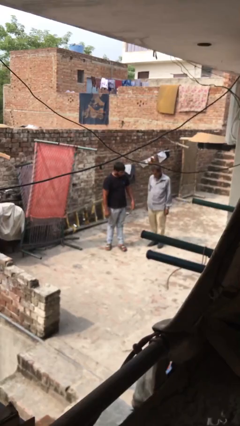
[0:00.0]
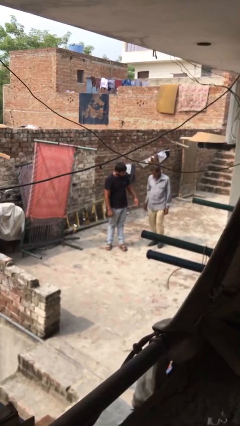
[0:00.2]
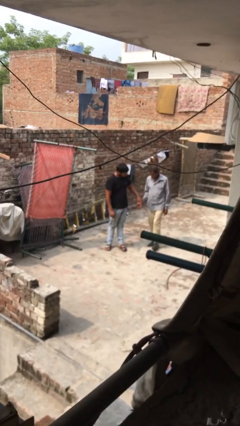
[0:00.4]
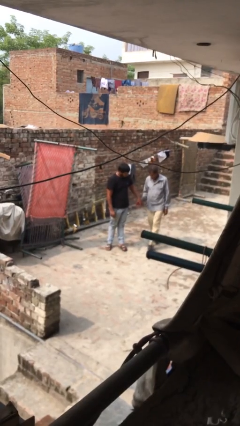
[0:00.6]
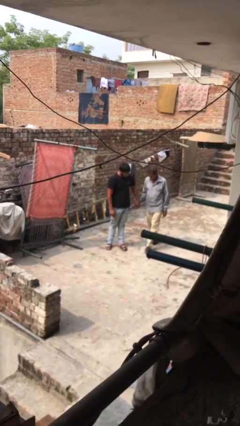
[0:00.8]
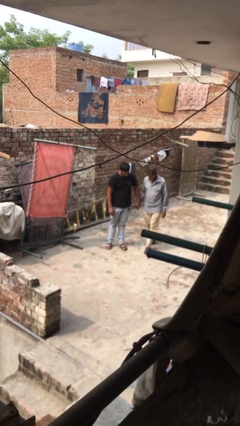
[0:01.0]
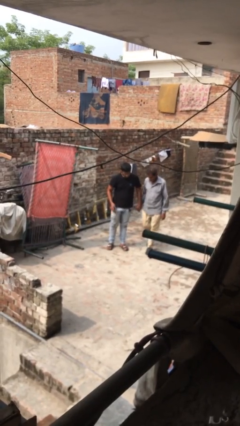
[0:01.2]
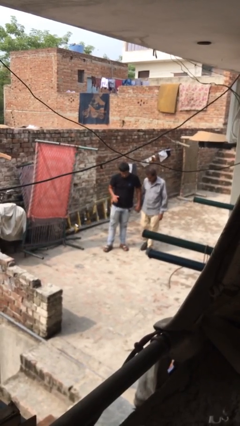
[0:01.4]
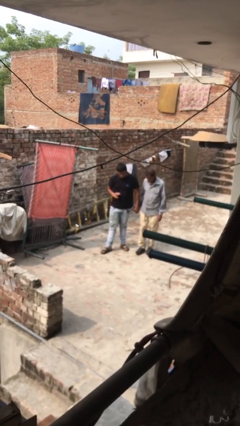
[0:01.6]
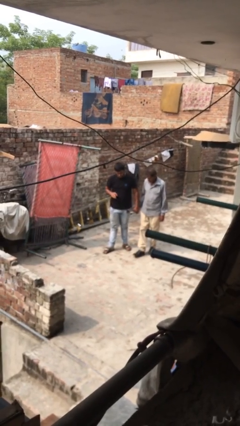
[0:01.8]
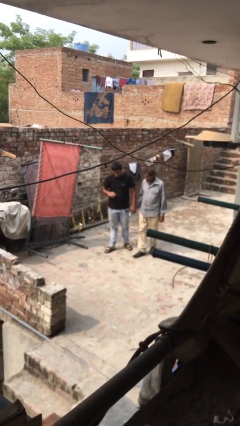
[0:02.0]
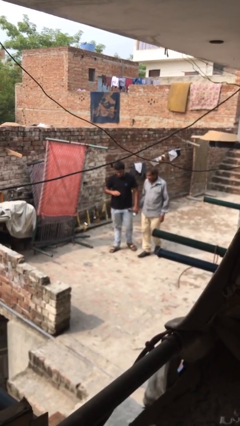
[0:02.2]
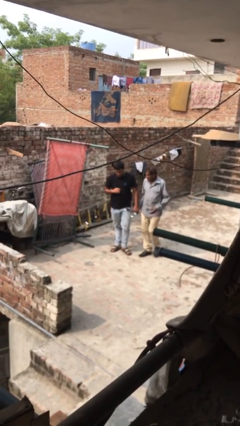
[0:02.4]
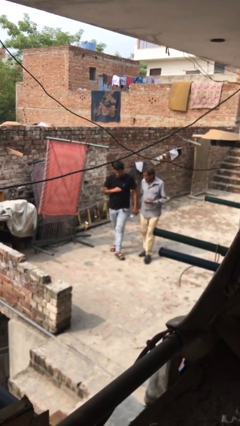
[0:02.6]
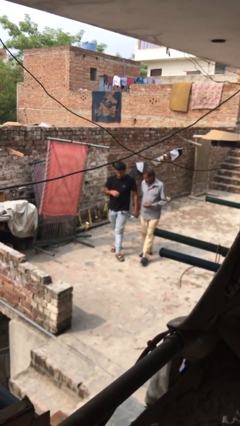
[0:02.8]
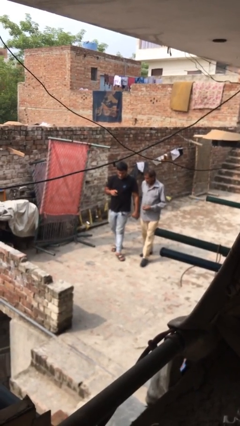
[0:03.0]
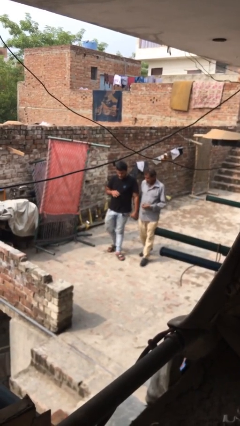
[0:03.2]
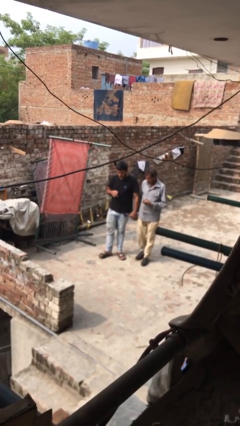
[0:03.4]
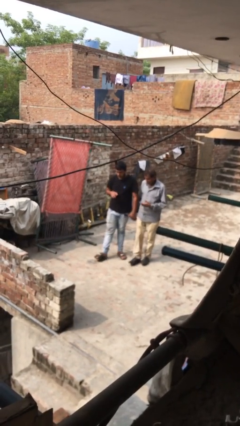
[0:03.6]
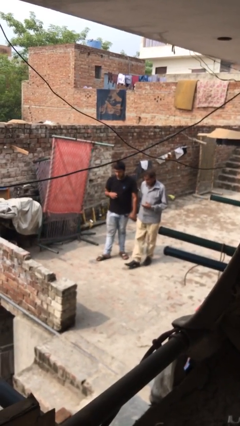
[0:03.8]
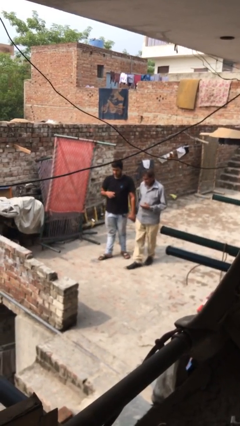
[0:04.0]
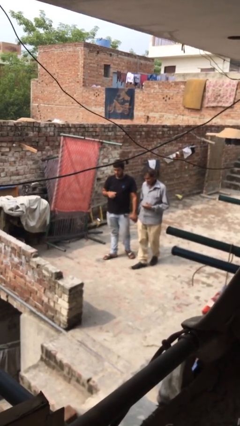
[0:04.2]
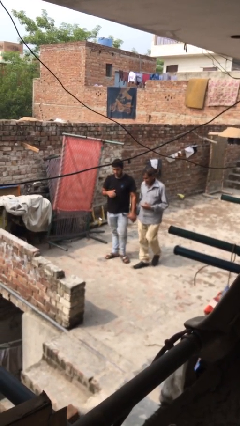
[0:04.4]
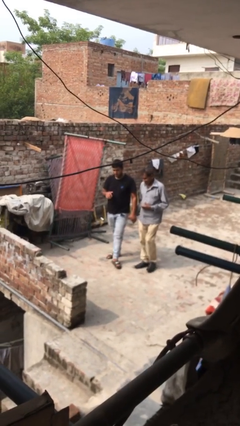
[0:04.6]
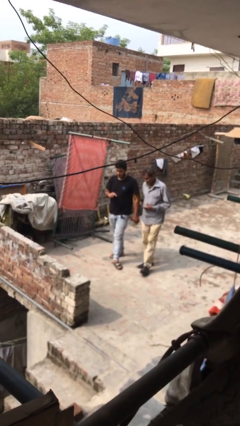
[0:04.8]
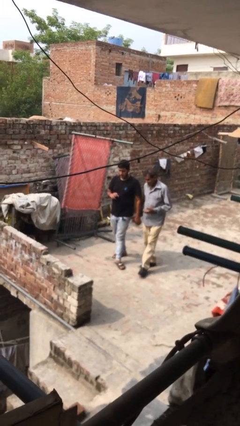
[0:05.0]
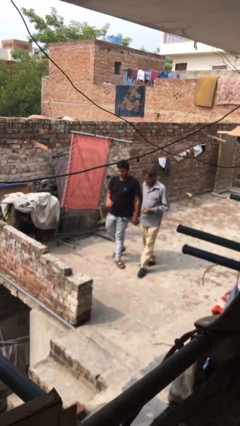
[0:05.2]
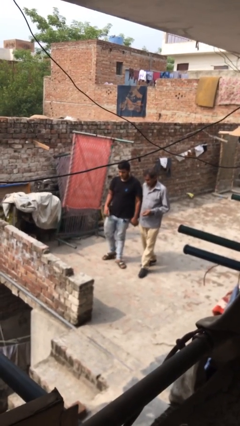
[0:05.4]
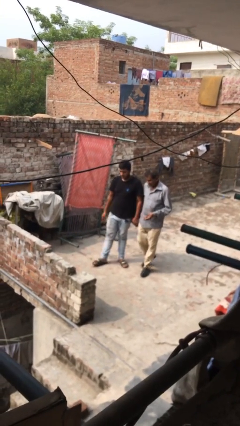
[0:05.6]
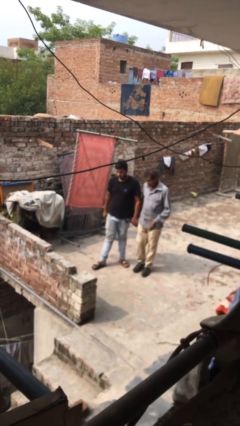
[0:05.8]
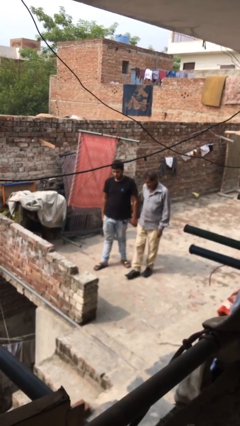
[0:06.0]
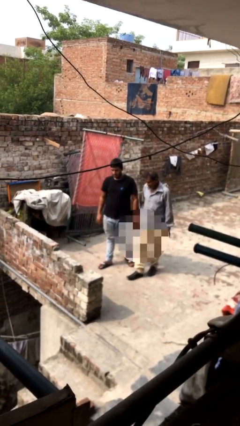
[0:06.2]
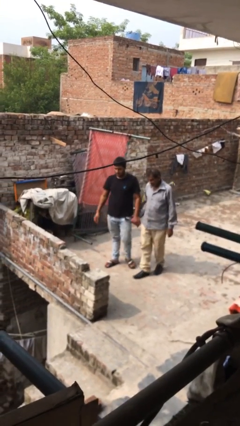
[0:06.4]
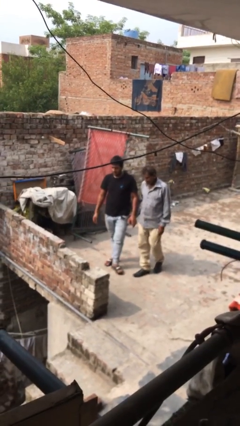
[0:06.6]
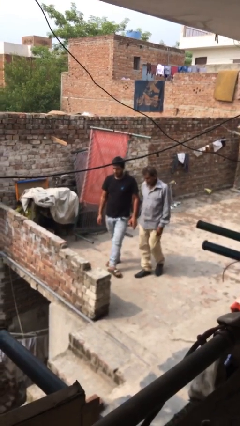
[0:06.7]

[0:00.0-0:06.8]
person holds hand

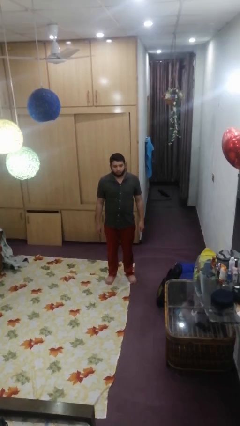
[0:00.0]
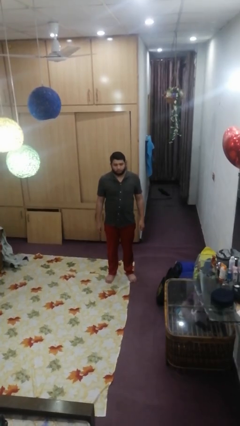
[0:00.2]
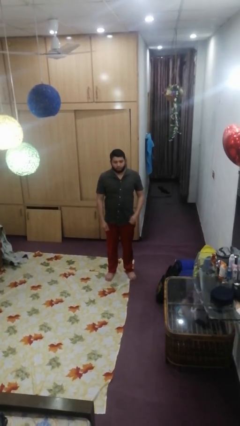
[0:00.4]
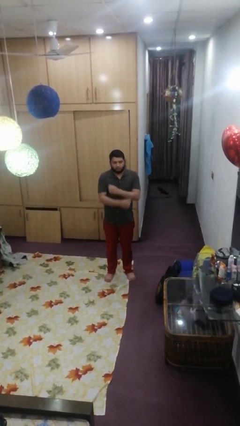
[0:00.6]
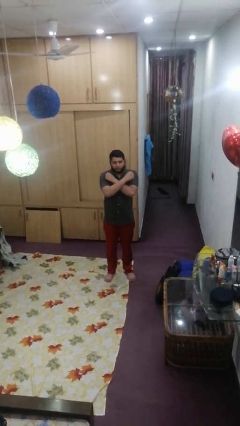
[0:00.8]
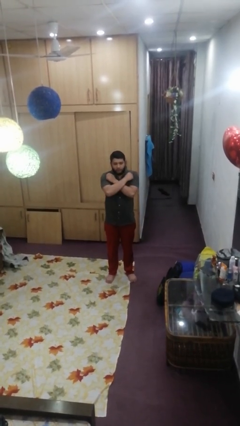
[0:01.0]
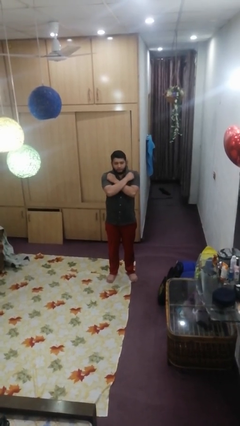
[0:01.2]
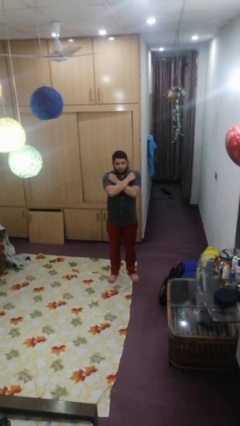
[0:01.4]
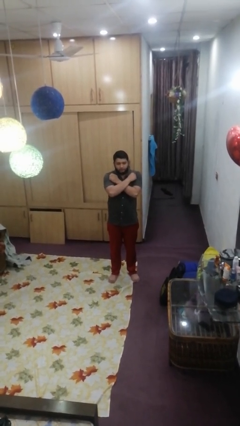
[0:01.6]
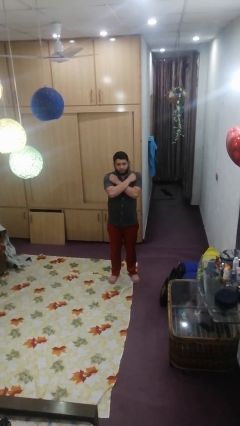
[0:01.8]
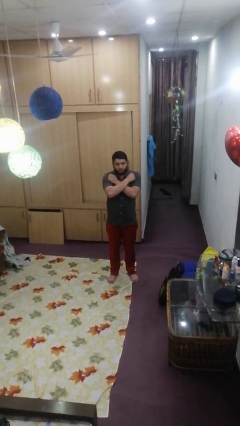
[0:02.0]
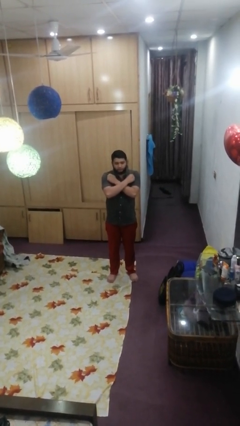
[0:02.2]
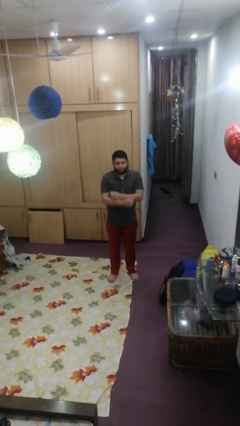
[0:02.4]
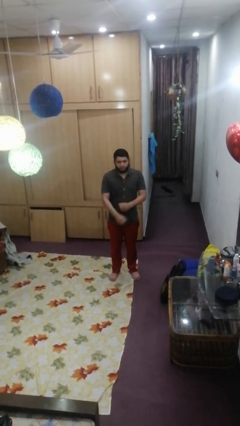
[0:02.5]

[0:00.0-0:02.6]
person crosses arms

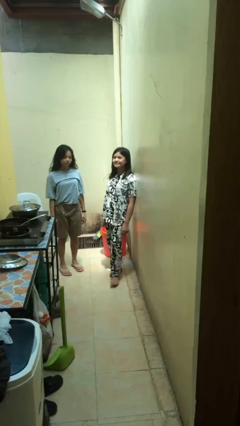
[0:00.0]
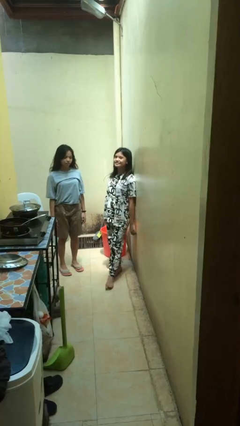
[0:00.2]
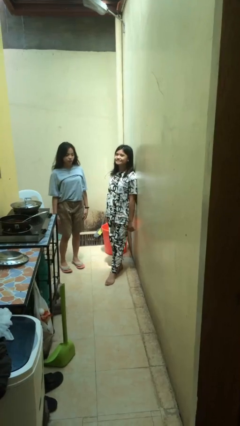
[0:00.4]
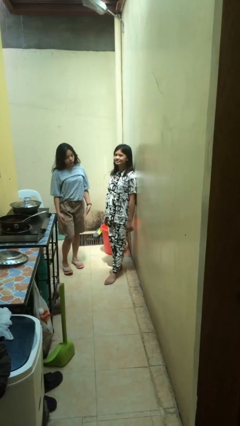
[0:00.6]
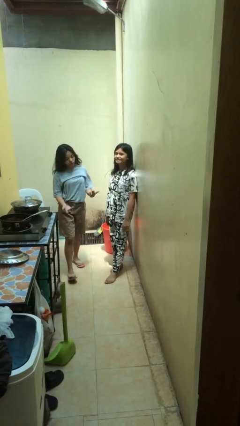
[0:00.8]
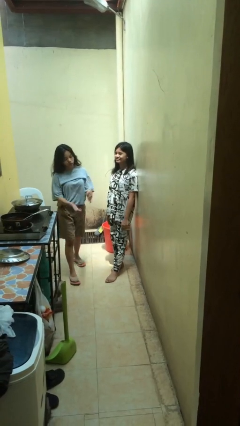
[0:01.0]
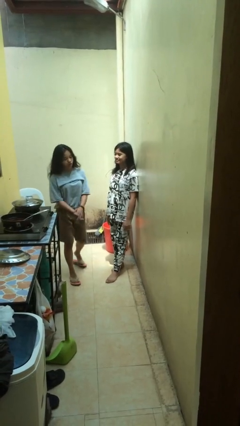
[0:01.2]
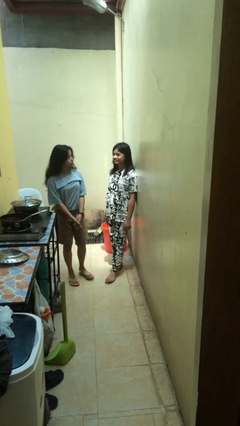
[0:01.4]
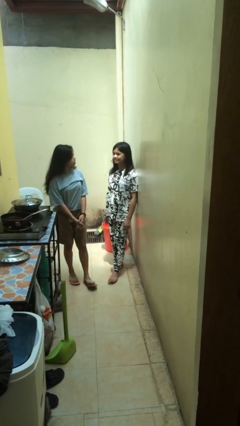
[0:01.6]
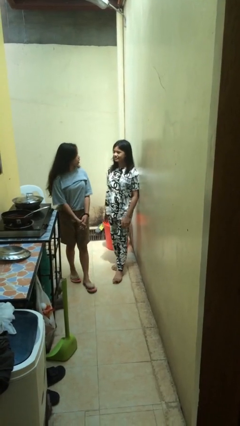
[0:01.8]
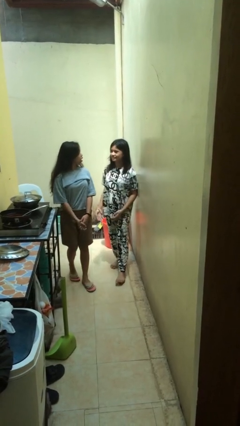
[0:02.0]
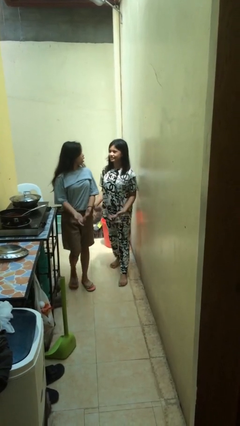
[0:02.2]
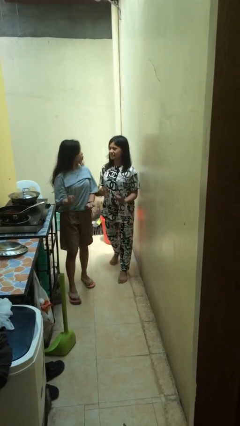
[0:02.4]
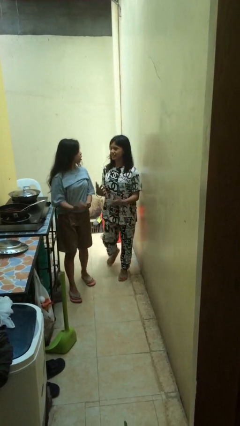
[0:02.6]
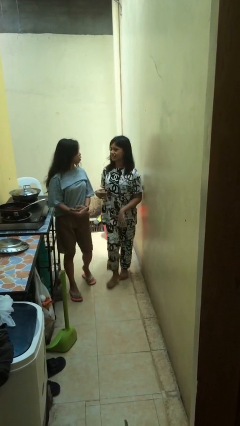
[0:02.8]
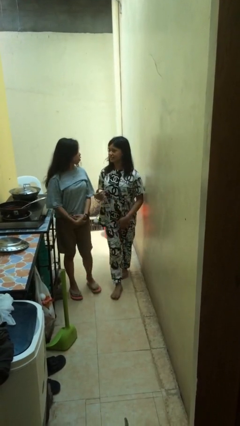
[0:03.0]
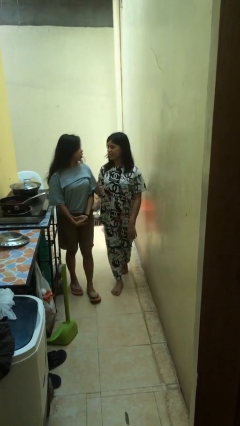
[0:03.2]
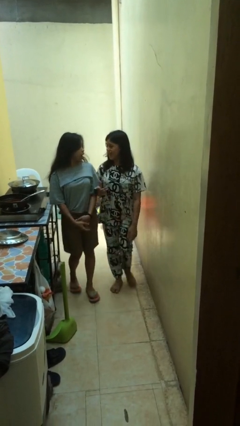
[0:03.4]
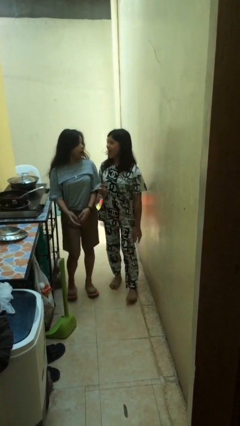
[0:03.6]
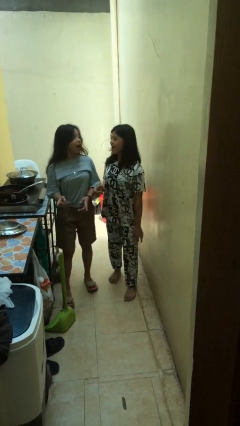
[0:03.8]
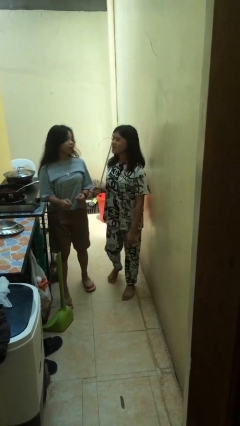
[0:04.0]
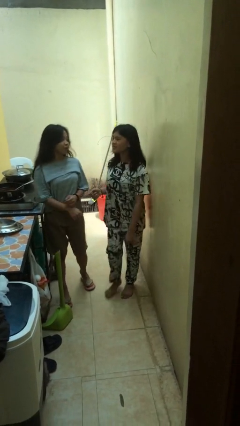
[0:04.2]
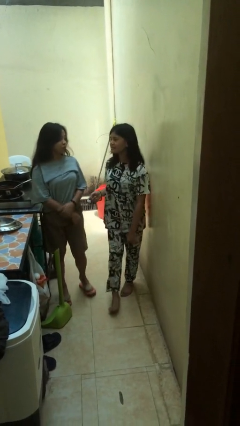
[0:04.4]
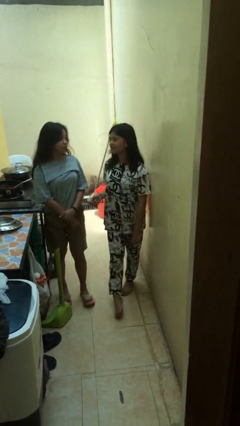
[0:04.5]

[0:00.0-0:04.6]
person talks to person

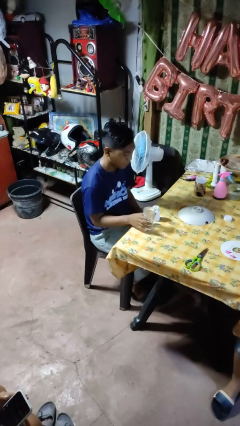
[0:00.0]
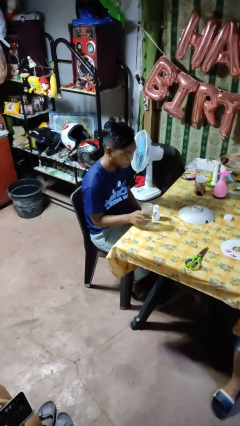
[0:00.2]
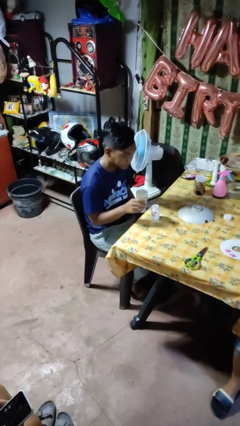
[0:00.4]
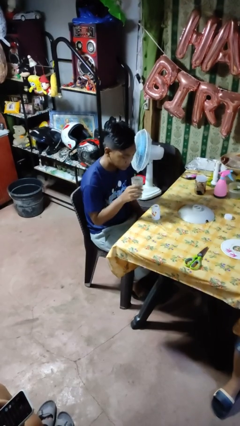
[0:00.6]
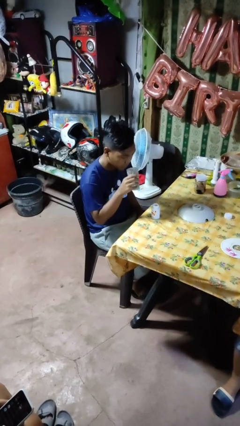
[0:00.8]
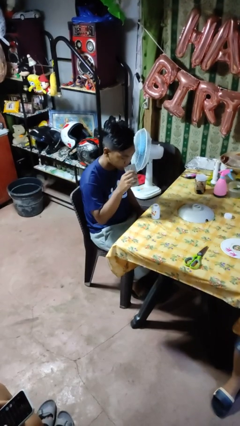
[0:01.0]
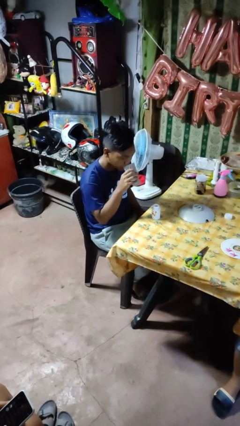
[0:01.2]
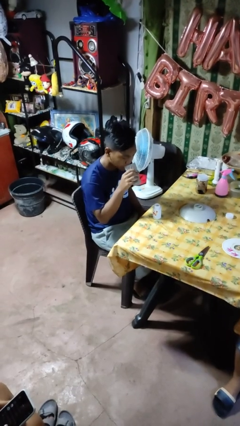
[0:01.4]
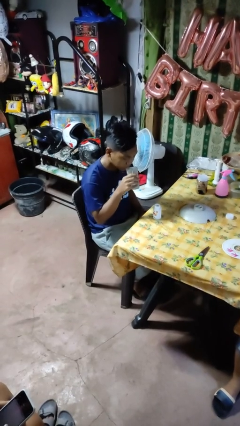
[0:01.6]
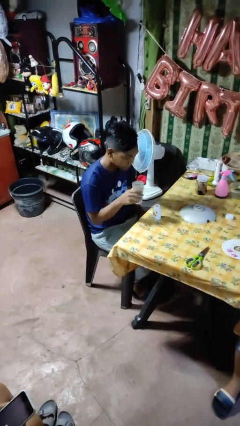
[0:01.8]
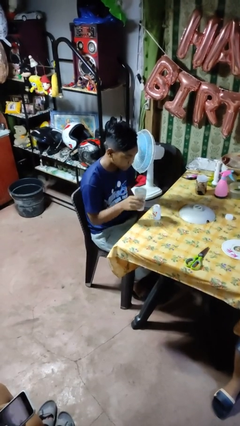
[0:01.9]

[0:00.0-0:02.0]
person drinks from cup

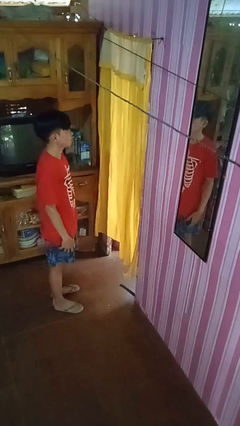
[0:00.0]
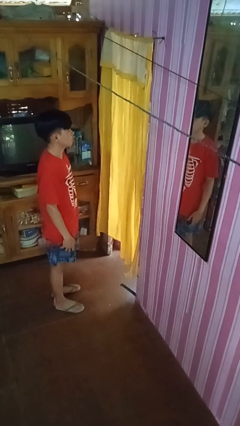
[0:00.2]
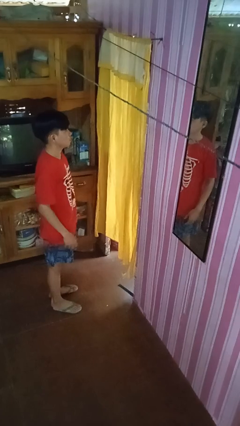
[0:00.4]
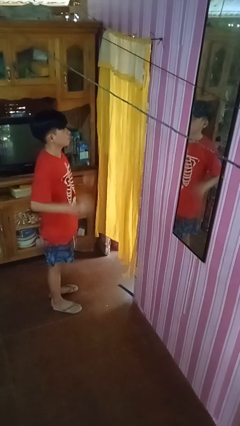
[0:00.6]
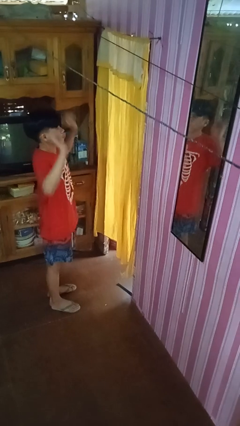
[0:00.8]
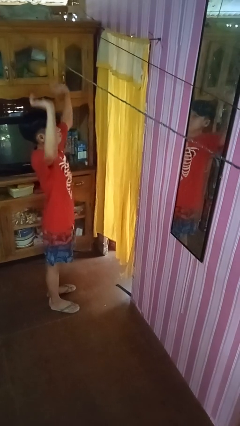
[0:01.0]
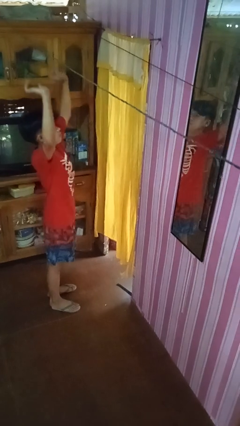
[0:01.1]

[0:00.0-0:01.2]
person stretches arms over head

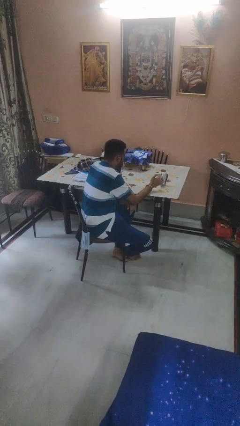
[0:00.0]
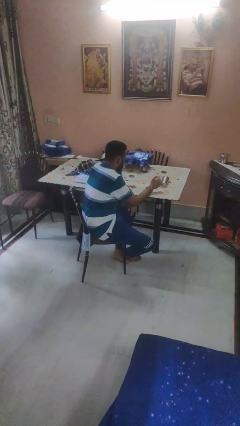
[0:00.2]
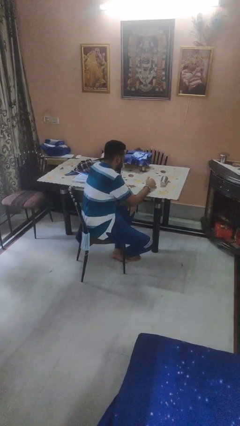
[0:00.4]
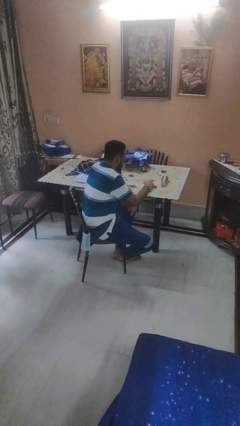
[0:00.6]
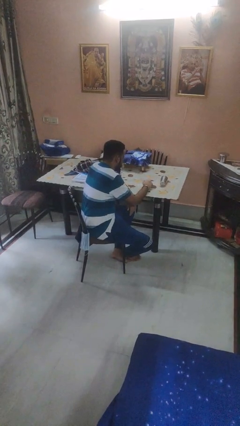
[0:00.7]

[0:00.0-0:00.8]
person knocks over glass
